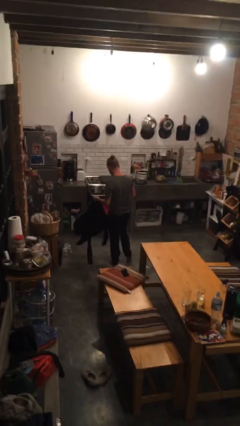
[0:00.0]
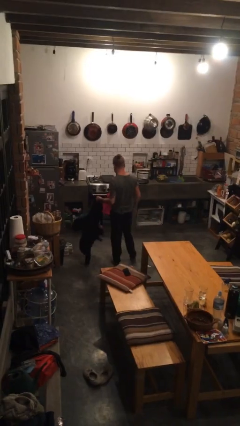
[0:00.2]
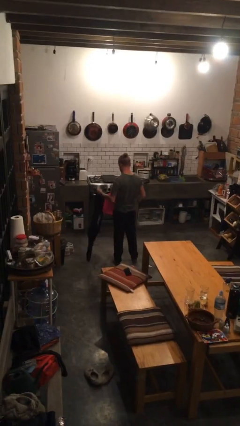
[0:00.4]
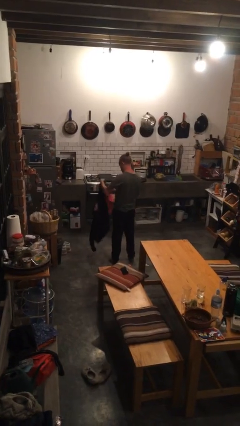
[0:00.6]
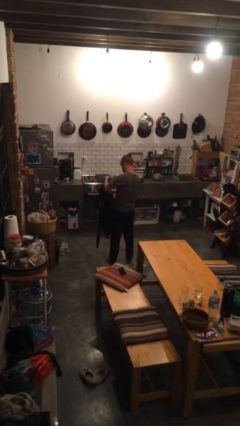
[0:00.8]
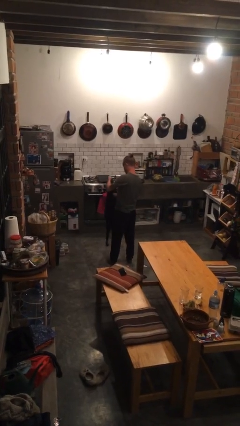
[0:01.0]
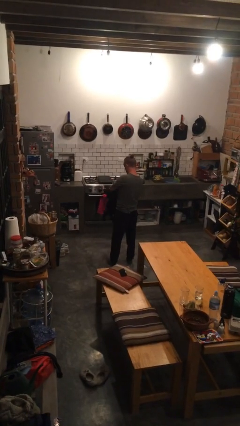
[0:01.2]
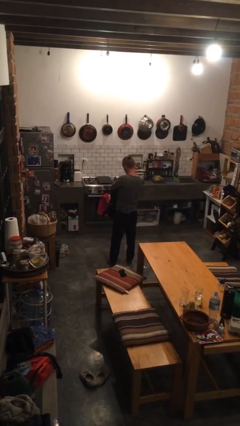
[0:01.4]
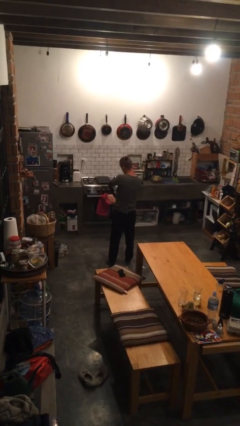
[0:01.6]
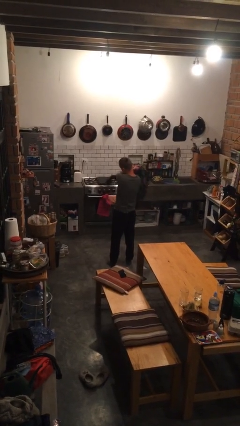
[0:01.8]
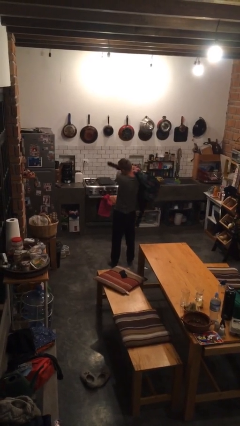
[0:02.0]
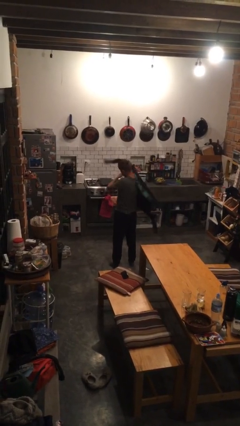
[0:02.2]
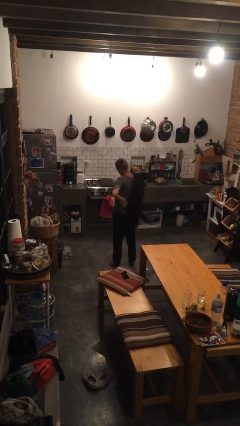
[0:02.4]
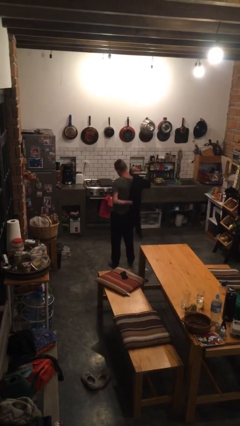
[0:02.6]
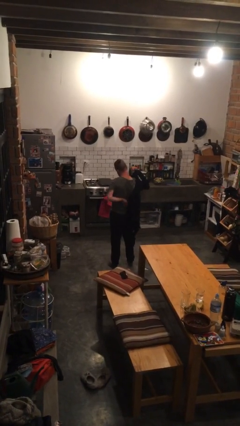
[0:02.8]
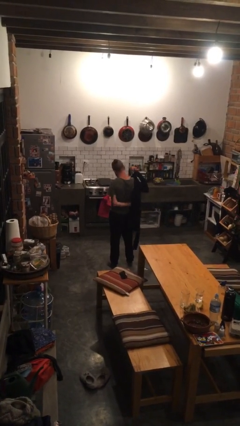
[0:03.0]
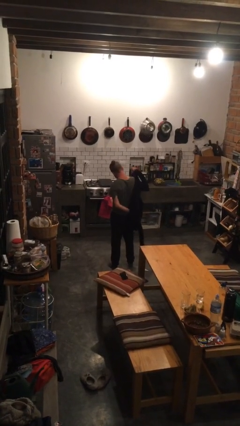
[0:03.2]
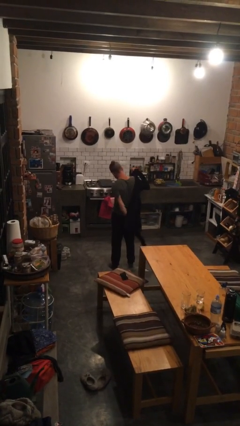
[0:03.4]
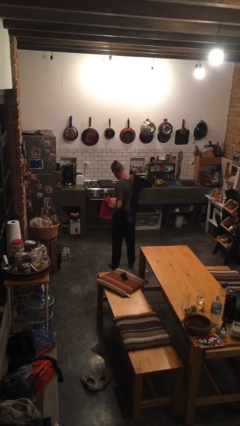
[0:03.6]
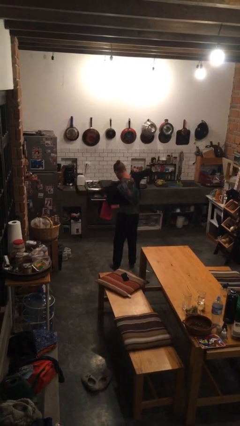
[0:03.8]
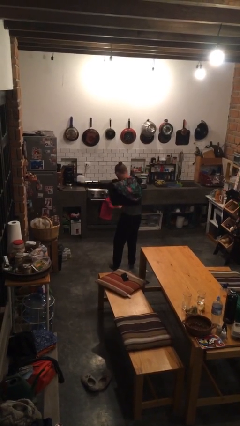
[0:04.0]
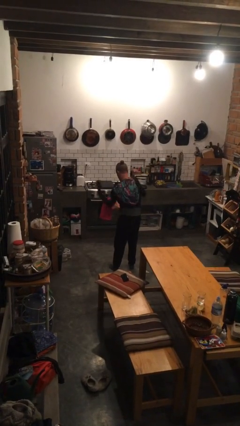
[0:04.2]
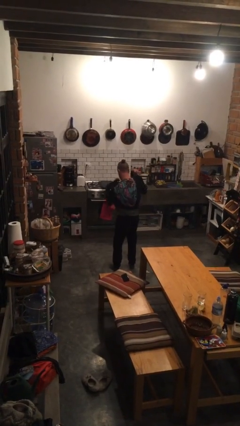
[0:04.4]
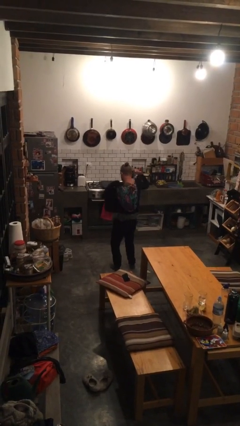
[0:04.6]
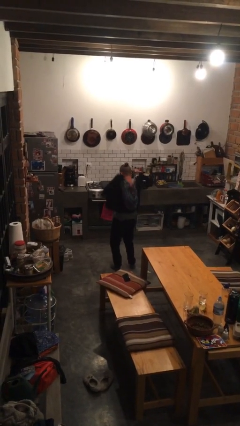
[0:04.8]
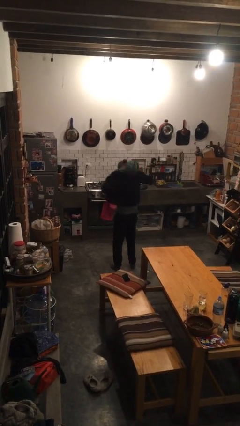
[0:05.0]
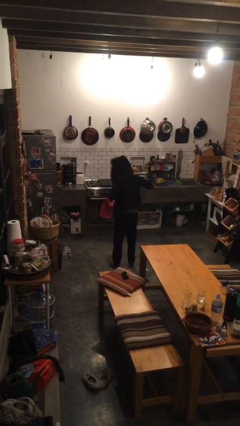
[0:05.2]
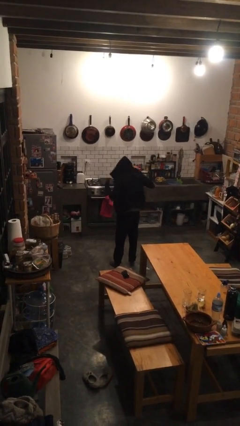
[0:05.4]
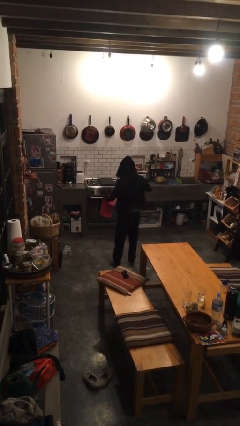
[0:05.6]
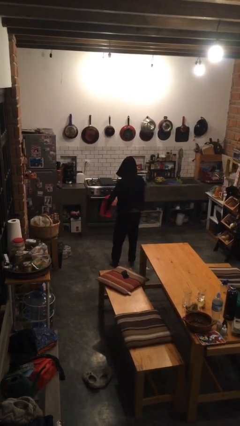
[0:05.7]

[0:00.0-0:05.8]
person puts on hoodie

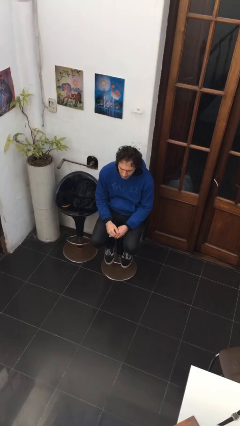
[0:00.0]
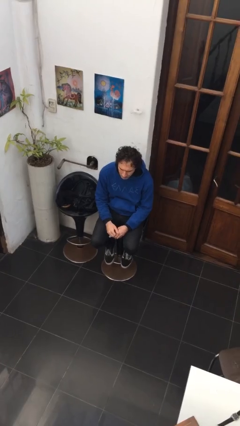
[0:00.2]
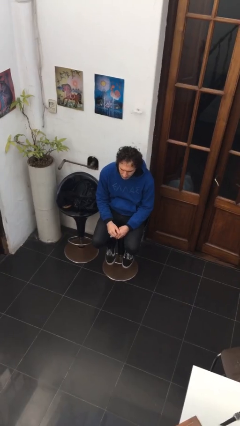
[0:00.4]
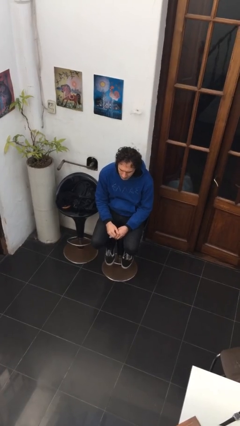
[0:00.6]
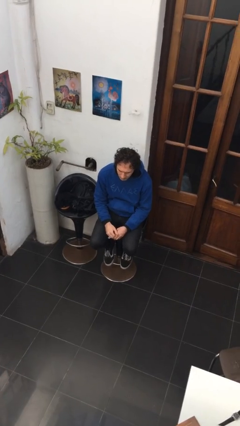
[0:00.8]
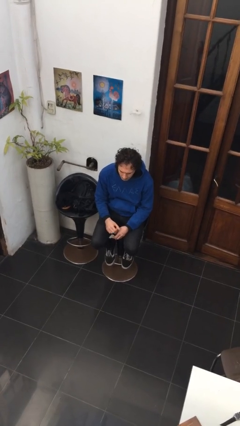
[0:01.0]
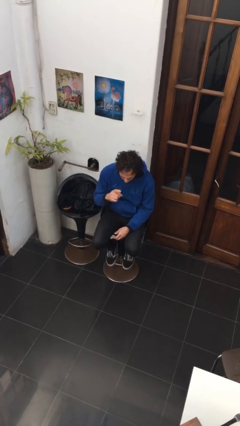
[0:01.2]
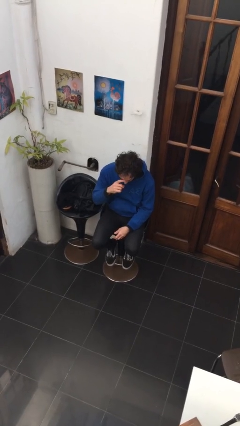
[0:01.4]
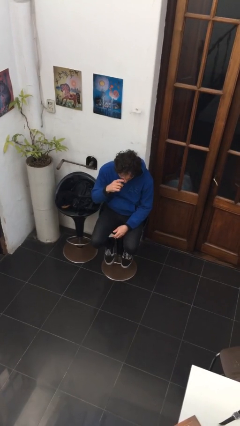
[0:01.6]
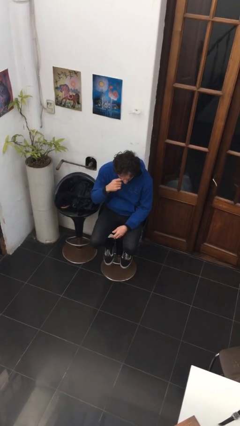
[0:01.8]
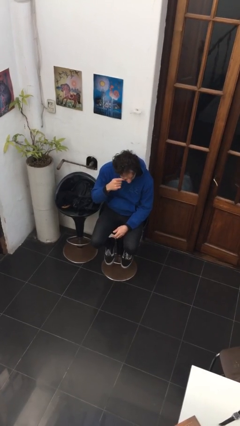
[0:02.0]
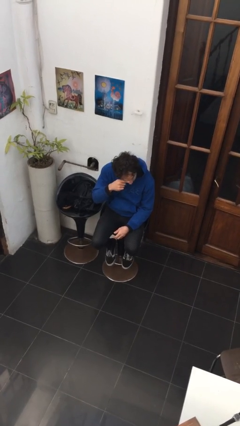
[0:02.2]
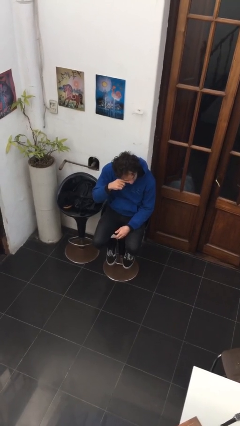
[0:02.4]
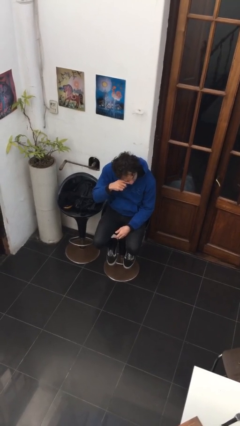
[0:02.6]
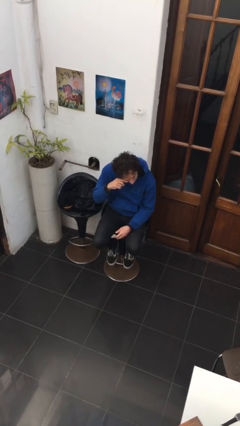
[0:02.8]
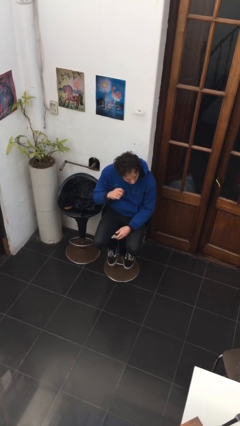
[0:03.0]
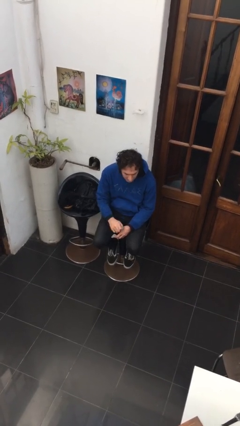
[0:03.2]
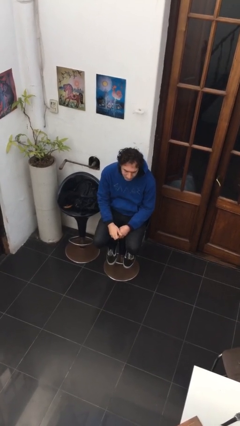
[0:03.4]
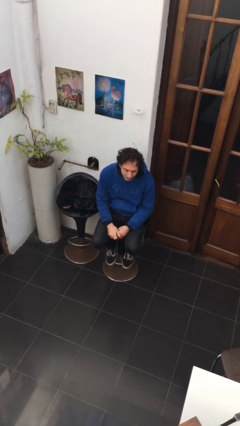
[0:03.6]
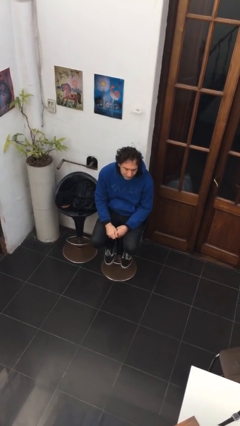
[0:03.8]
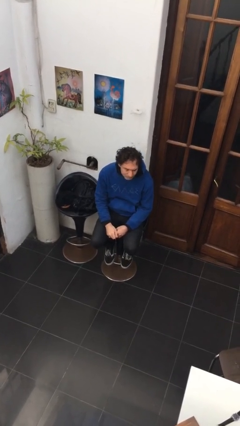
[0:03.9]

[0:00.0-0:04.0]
person scratches face

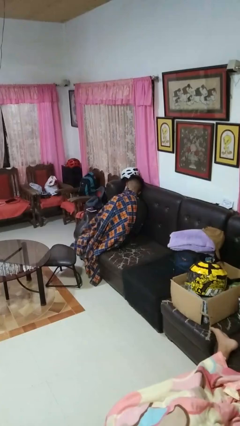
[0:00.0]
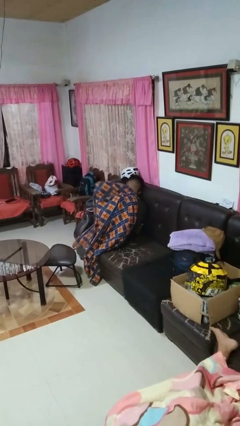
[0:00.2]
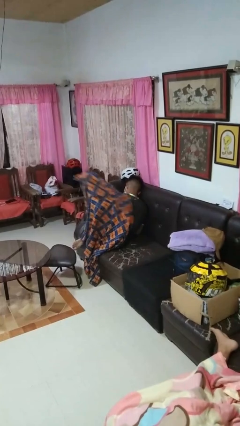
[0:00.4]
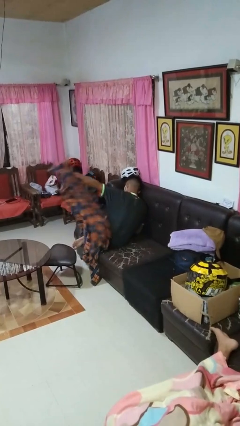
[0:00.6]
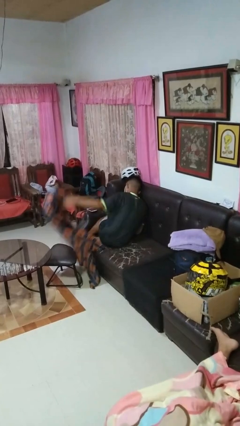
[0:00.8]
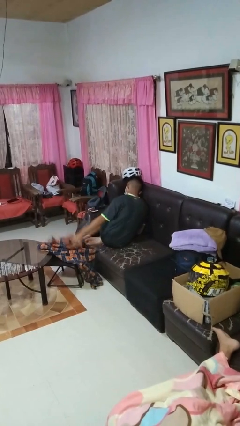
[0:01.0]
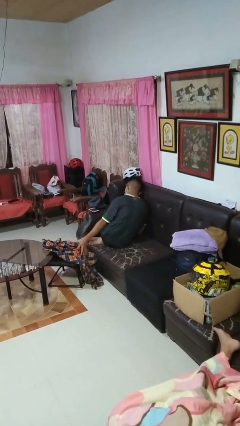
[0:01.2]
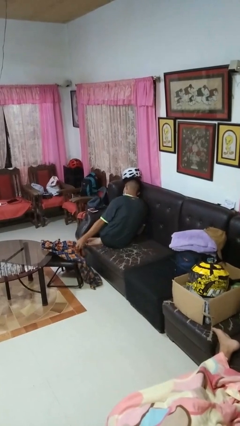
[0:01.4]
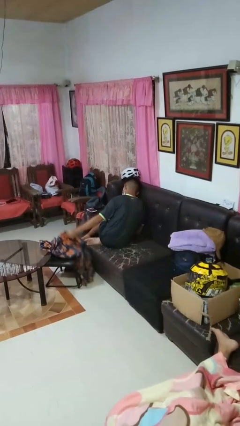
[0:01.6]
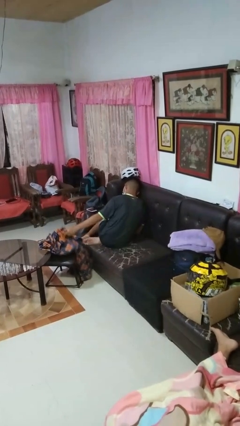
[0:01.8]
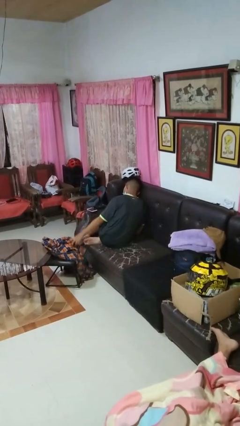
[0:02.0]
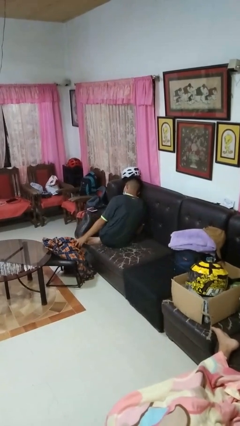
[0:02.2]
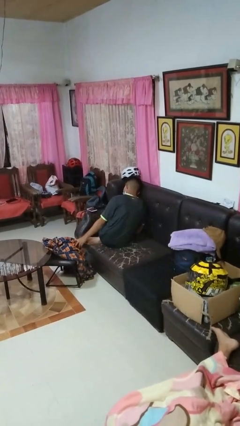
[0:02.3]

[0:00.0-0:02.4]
person uncovers with blanket

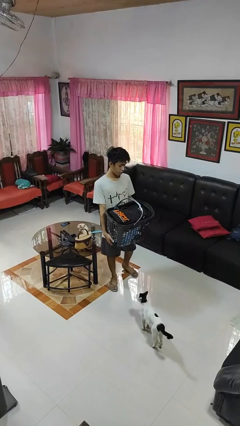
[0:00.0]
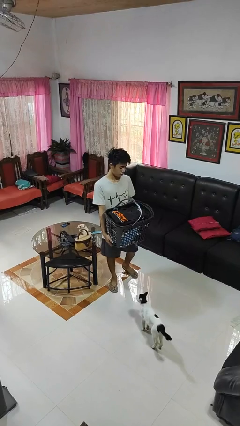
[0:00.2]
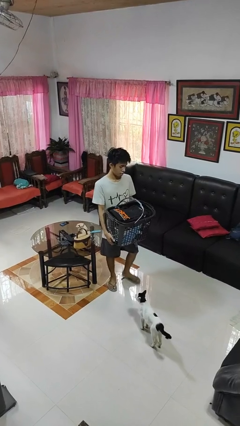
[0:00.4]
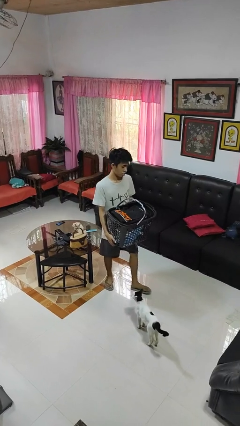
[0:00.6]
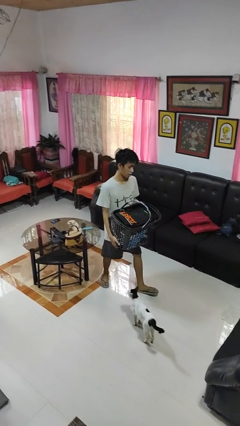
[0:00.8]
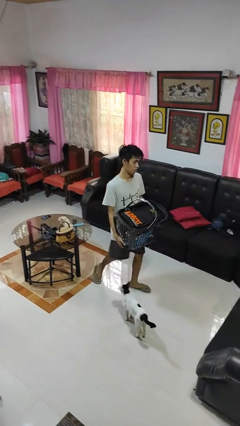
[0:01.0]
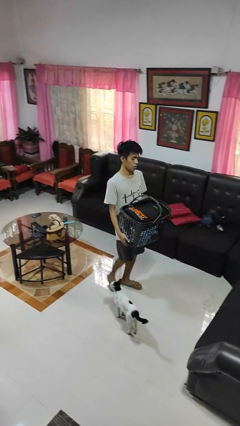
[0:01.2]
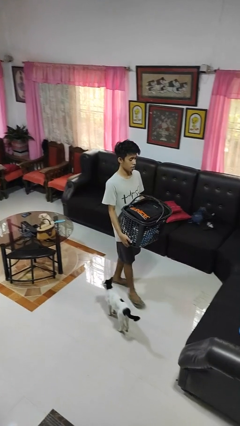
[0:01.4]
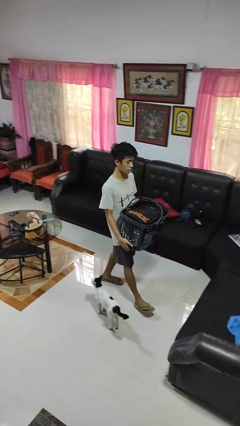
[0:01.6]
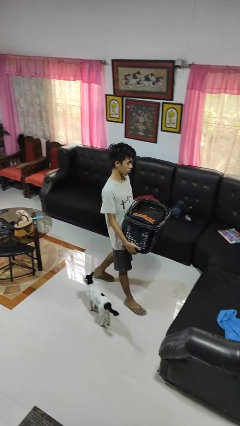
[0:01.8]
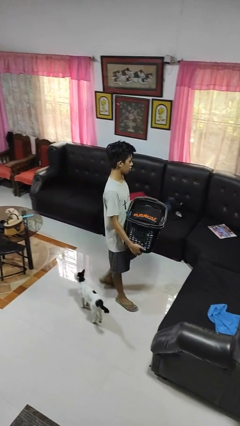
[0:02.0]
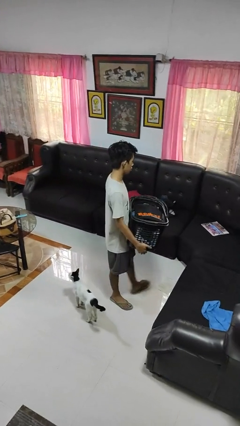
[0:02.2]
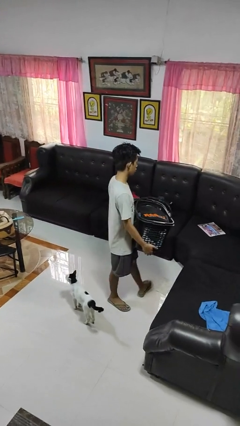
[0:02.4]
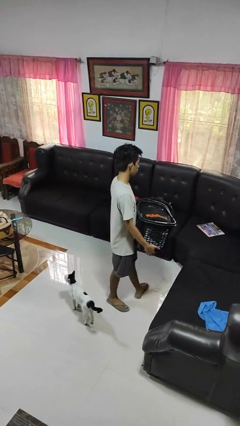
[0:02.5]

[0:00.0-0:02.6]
person carries laundry basket

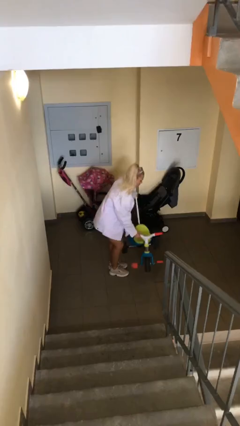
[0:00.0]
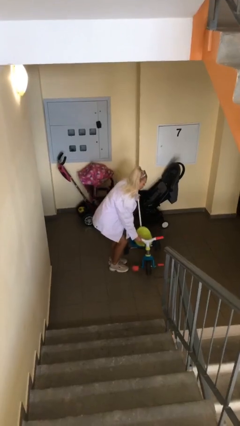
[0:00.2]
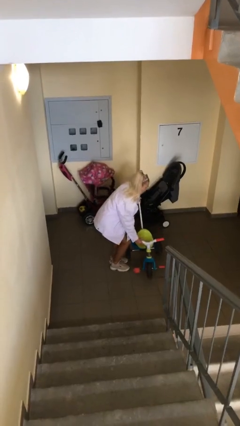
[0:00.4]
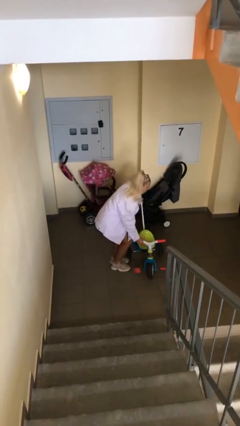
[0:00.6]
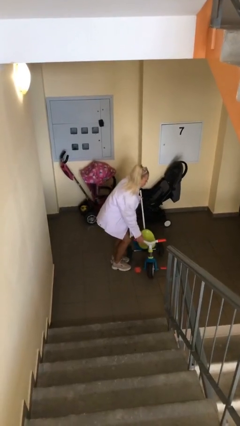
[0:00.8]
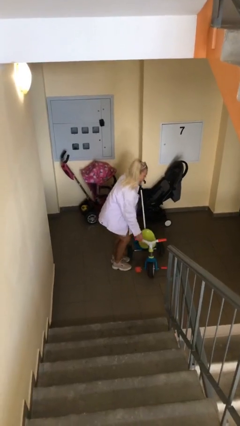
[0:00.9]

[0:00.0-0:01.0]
person puts down object on floor

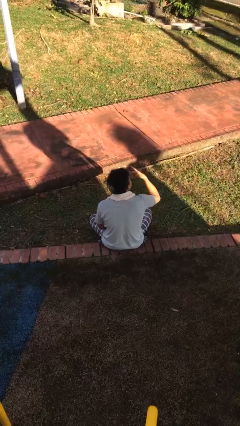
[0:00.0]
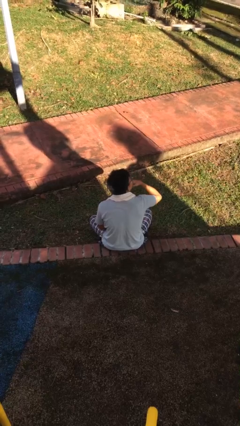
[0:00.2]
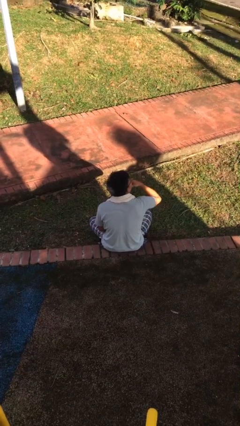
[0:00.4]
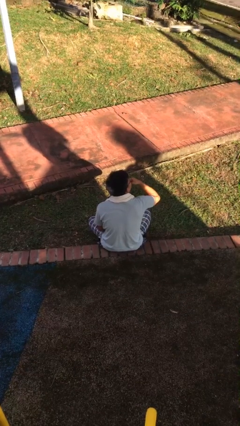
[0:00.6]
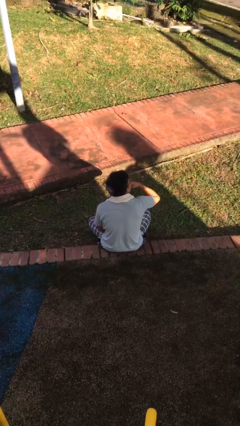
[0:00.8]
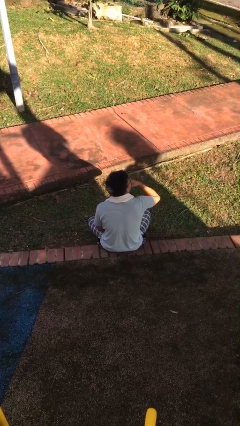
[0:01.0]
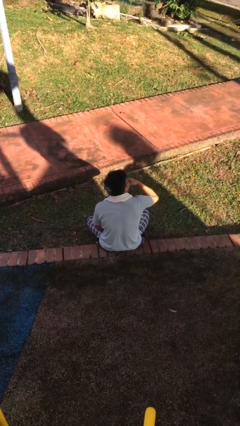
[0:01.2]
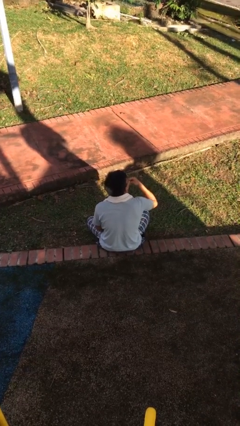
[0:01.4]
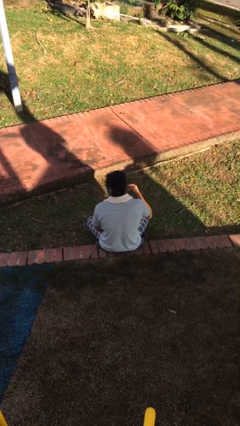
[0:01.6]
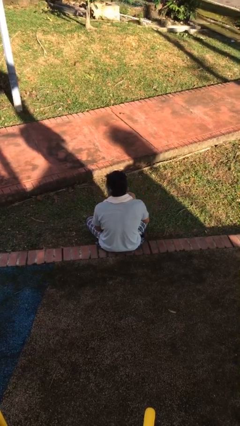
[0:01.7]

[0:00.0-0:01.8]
person strokes chin
